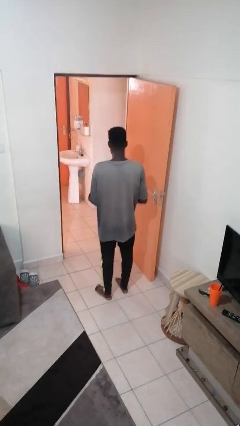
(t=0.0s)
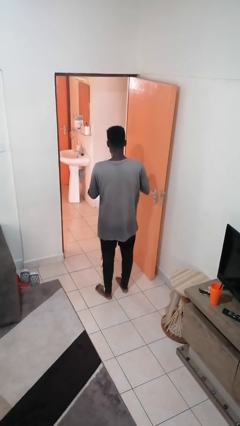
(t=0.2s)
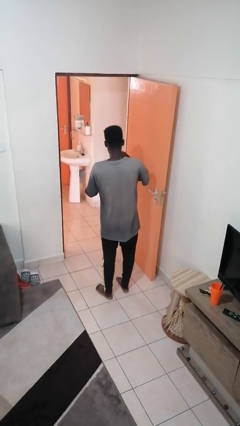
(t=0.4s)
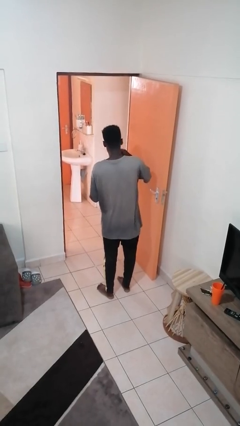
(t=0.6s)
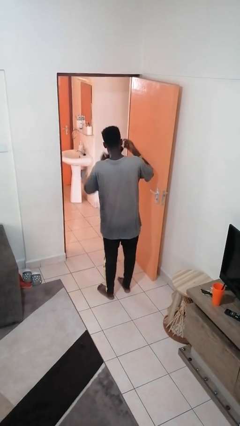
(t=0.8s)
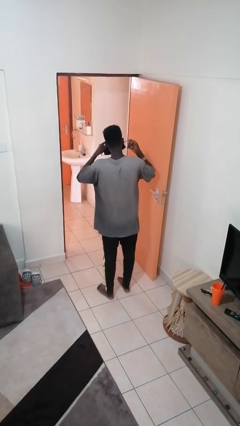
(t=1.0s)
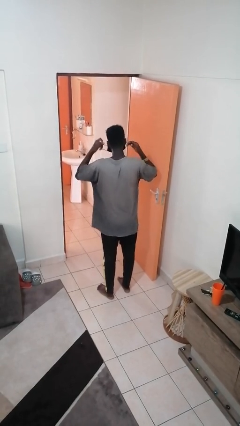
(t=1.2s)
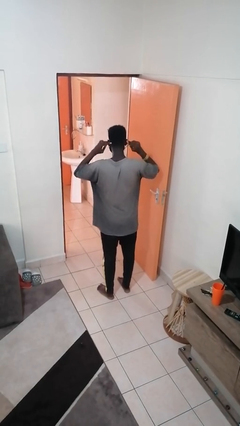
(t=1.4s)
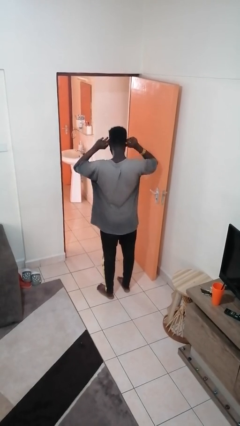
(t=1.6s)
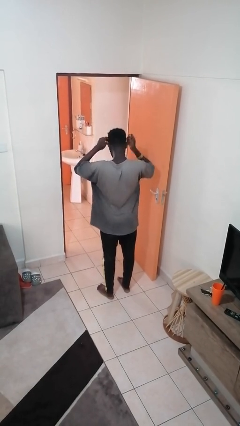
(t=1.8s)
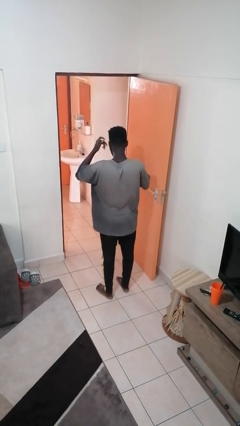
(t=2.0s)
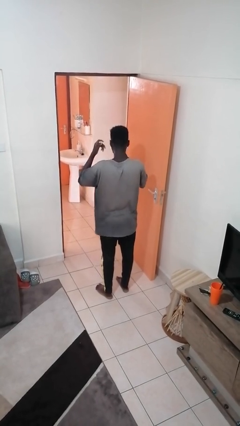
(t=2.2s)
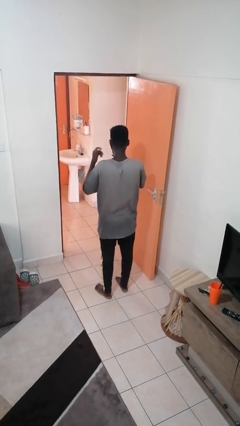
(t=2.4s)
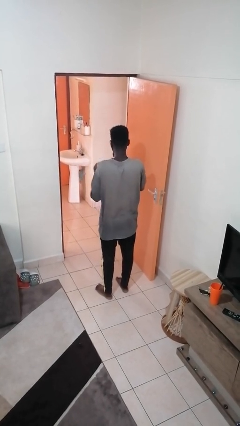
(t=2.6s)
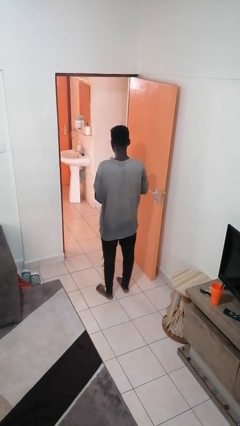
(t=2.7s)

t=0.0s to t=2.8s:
person puts on facemask

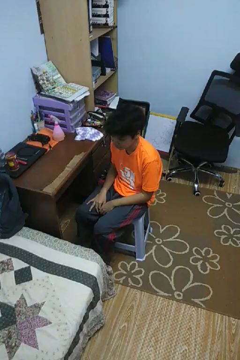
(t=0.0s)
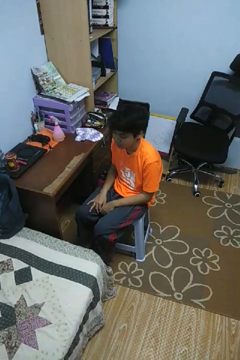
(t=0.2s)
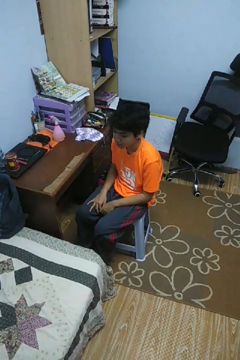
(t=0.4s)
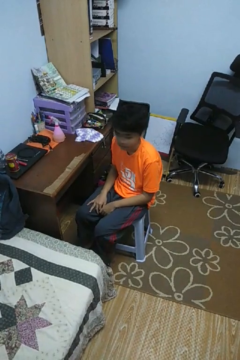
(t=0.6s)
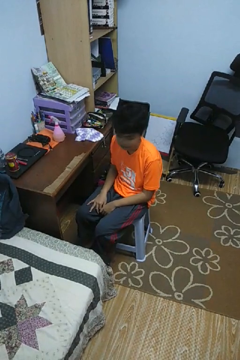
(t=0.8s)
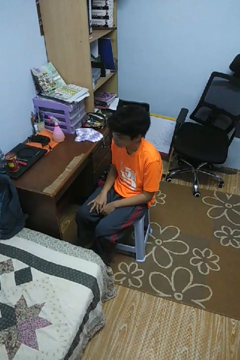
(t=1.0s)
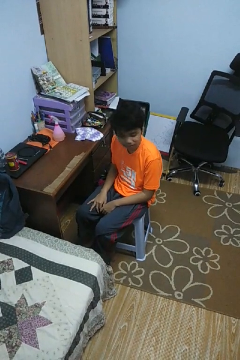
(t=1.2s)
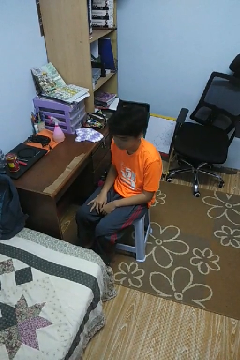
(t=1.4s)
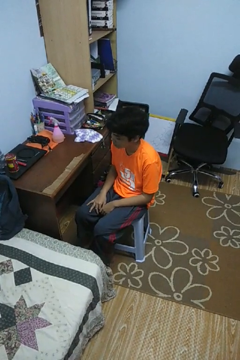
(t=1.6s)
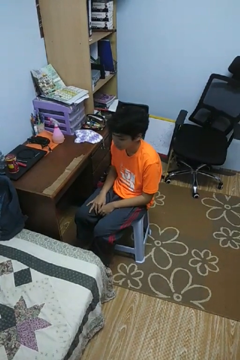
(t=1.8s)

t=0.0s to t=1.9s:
person shakes head

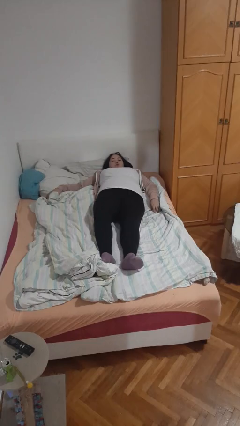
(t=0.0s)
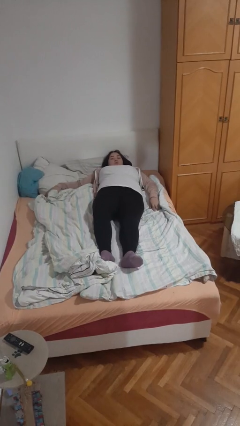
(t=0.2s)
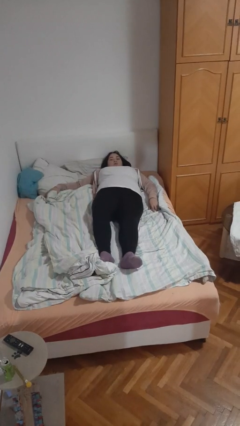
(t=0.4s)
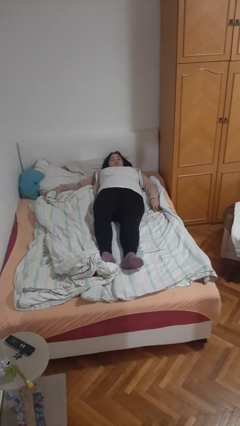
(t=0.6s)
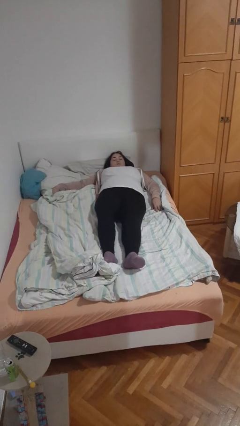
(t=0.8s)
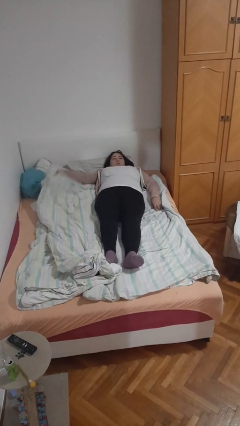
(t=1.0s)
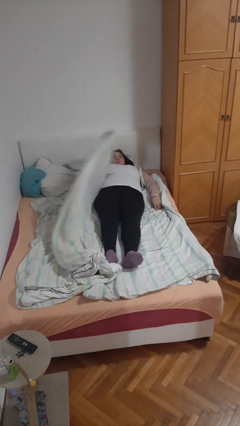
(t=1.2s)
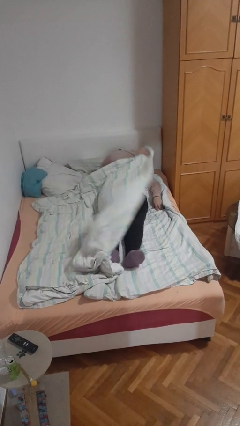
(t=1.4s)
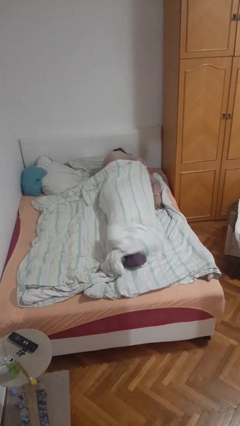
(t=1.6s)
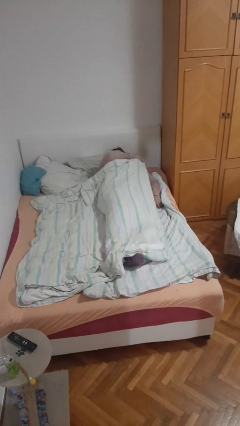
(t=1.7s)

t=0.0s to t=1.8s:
person covers with bedsheets

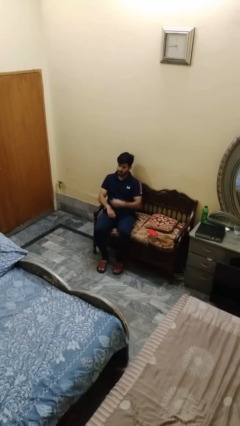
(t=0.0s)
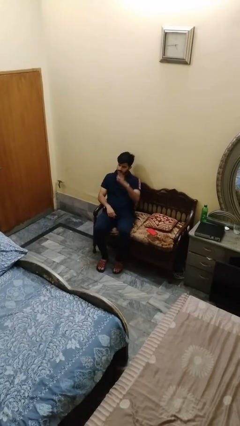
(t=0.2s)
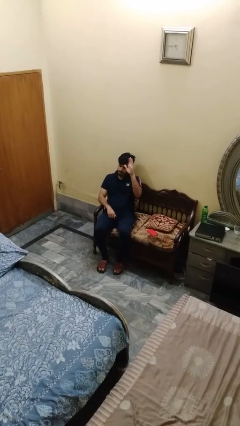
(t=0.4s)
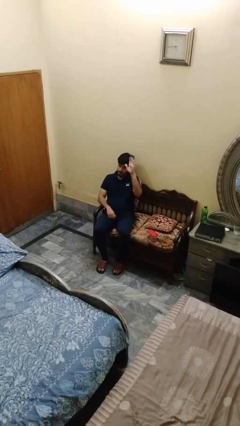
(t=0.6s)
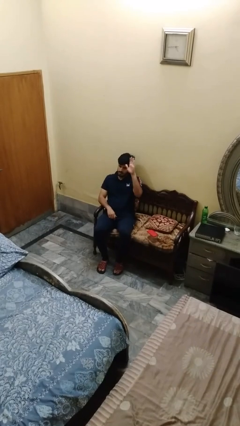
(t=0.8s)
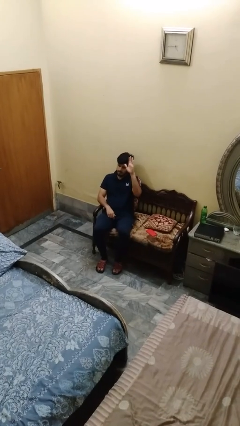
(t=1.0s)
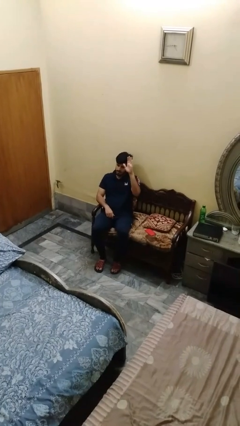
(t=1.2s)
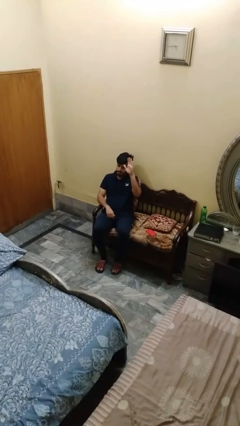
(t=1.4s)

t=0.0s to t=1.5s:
person gestures raise hand

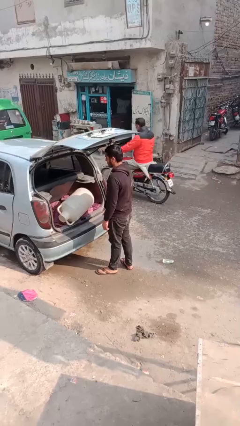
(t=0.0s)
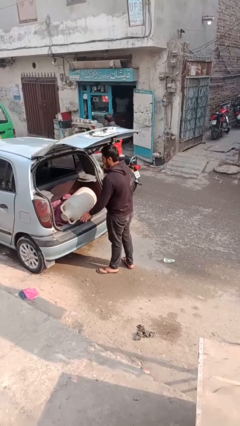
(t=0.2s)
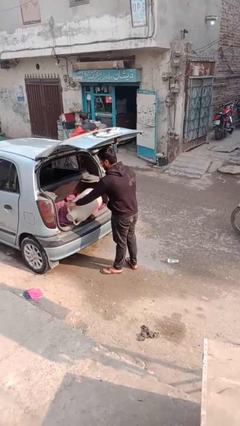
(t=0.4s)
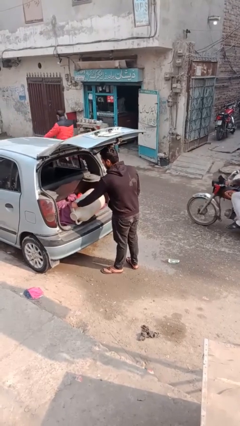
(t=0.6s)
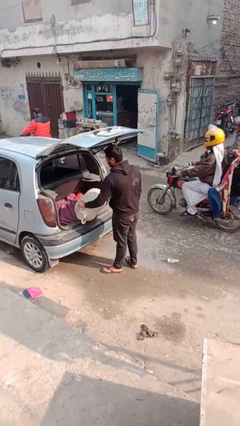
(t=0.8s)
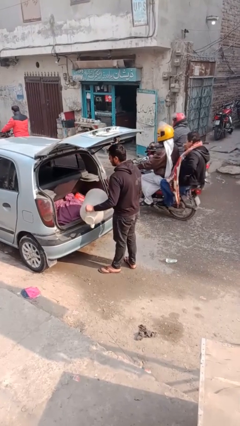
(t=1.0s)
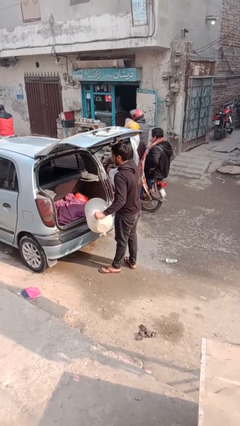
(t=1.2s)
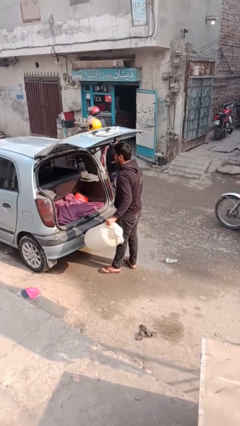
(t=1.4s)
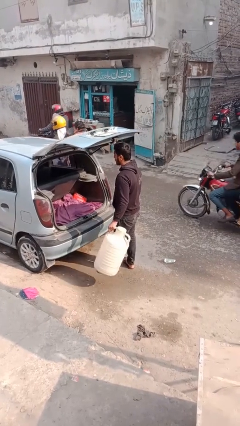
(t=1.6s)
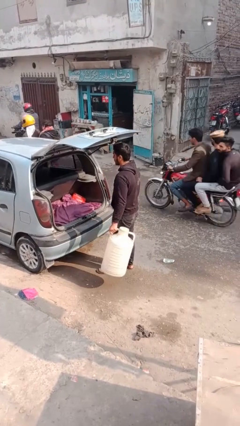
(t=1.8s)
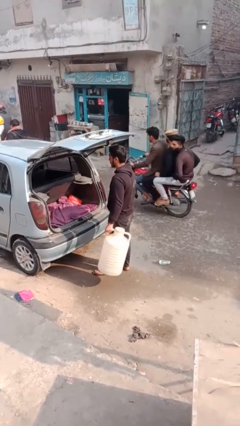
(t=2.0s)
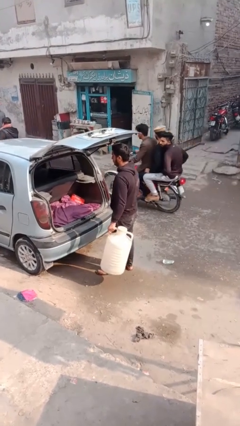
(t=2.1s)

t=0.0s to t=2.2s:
person unloads car

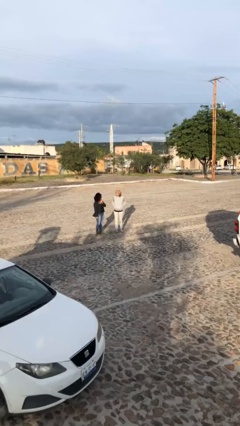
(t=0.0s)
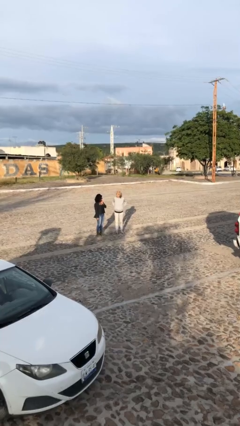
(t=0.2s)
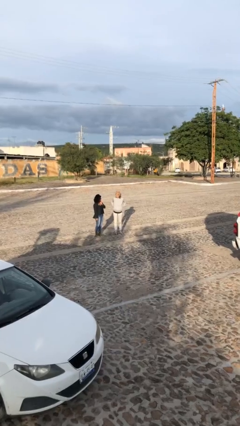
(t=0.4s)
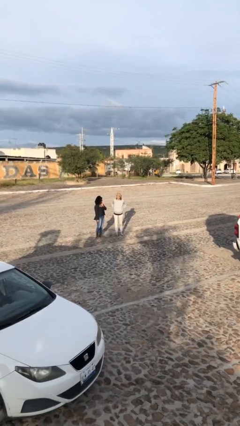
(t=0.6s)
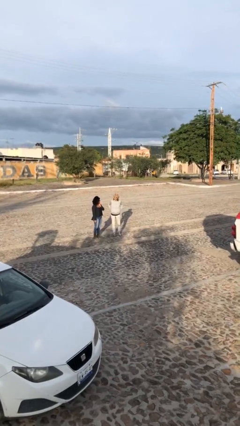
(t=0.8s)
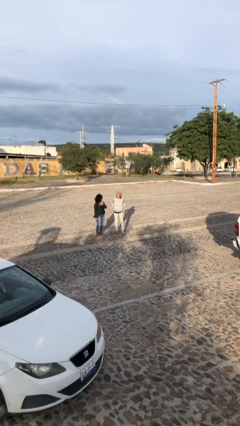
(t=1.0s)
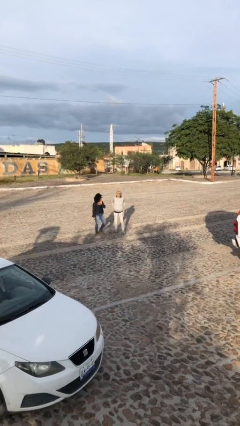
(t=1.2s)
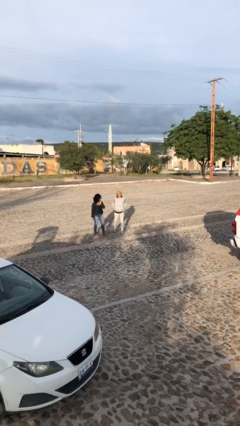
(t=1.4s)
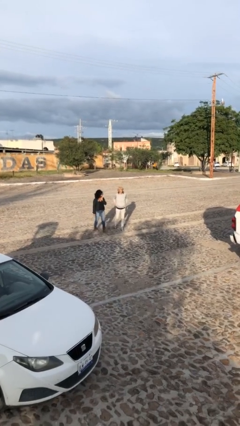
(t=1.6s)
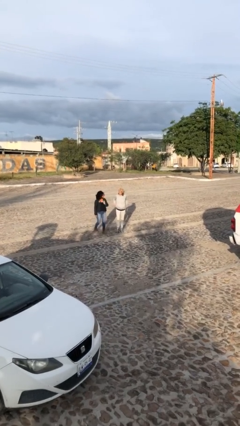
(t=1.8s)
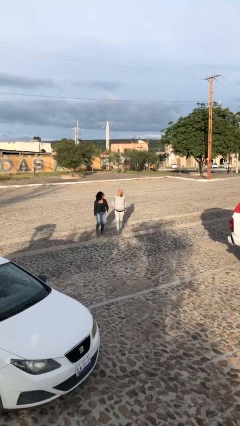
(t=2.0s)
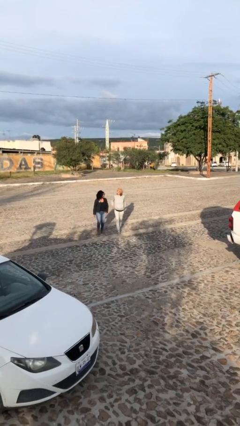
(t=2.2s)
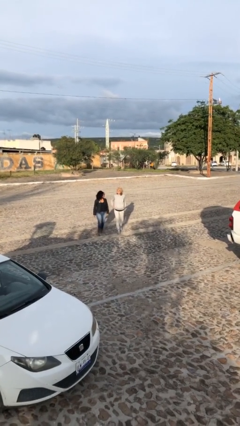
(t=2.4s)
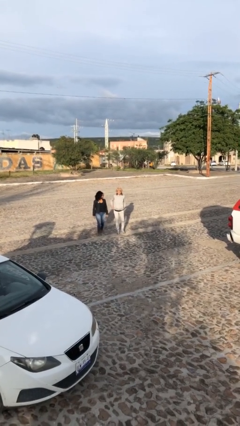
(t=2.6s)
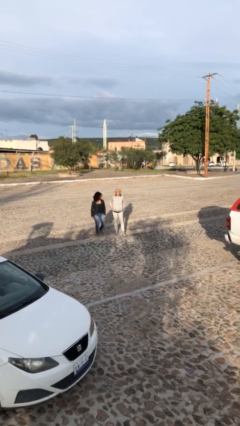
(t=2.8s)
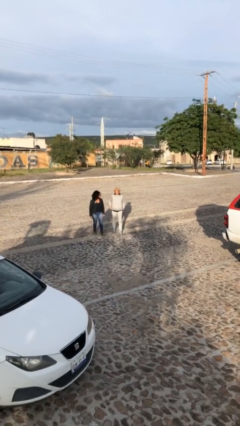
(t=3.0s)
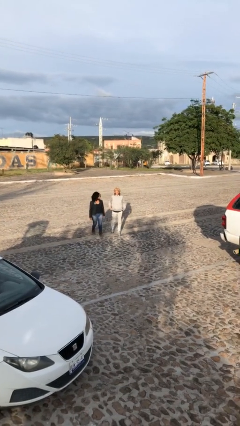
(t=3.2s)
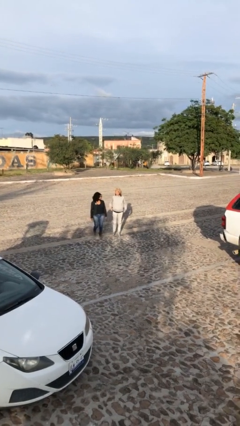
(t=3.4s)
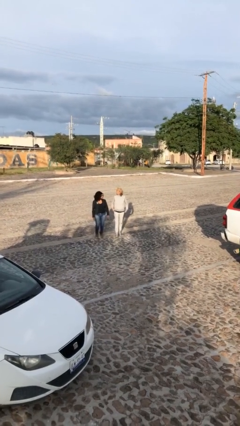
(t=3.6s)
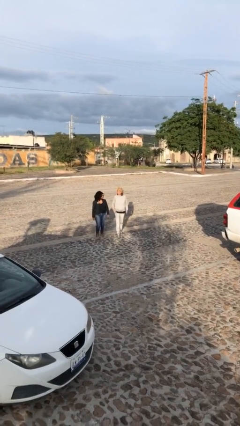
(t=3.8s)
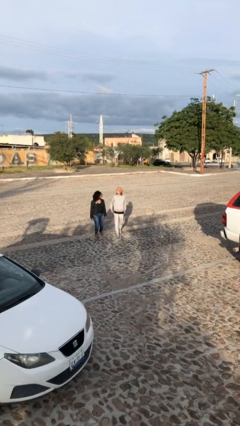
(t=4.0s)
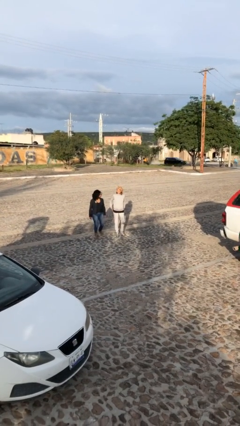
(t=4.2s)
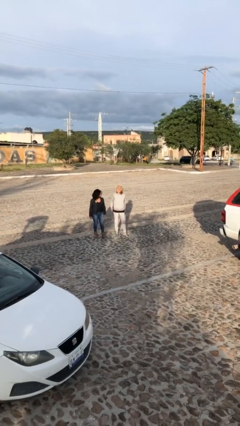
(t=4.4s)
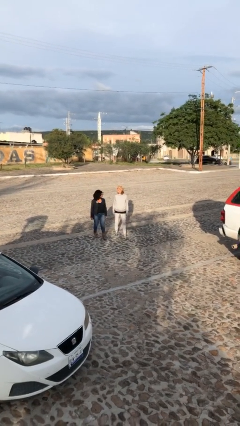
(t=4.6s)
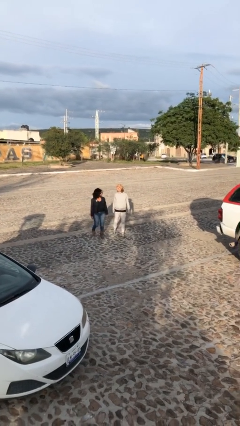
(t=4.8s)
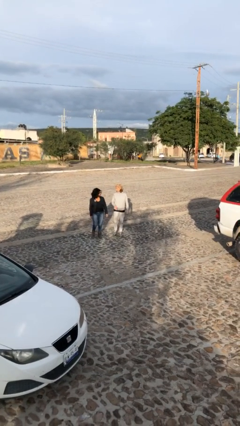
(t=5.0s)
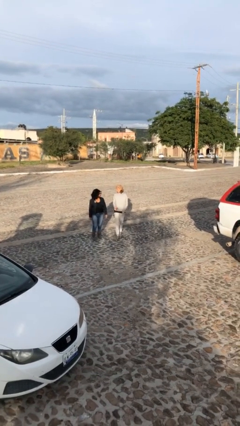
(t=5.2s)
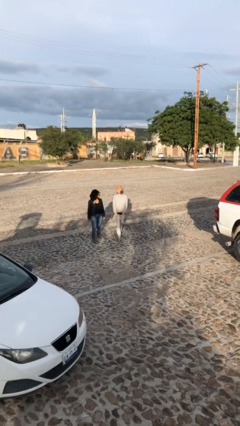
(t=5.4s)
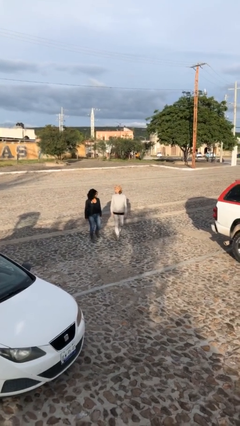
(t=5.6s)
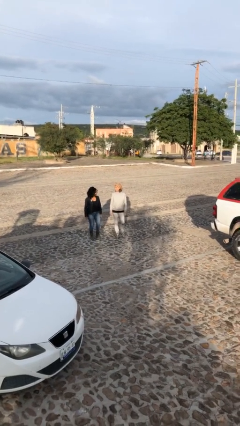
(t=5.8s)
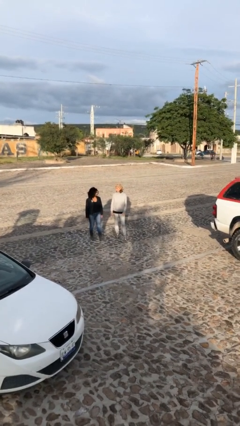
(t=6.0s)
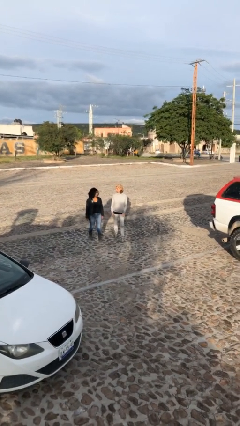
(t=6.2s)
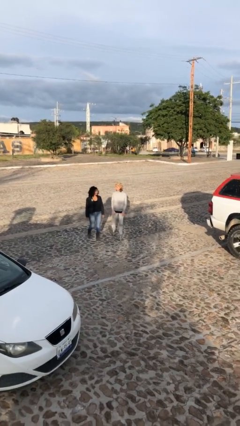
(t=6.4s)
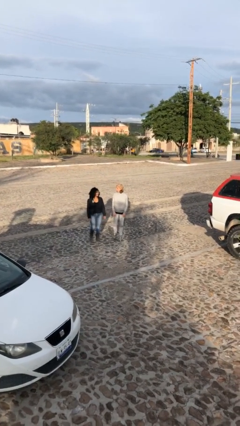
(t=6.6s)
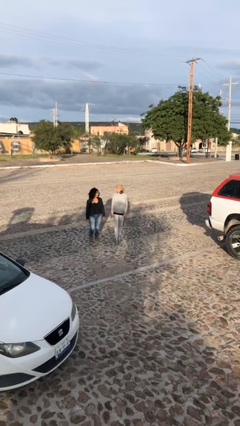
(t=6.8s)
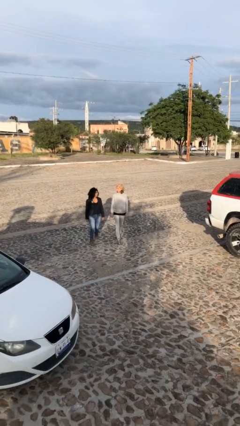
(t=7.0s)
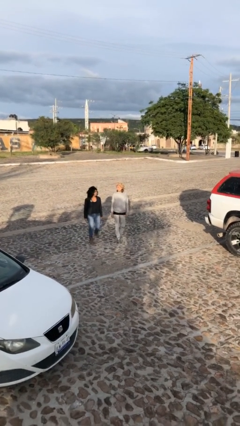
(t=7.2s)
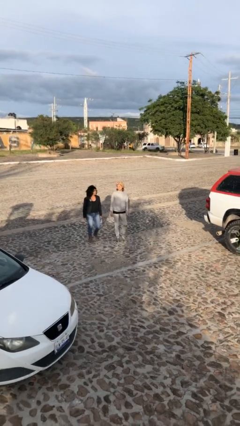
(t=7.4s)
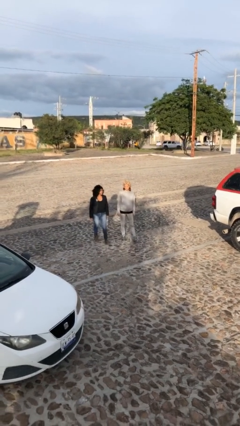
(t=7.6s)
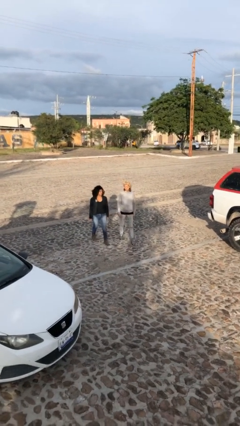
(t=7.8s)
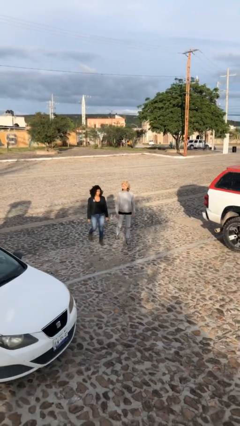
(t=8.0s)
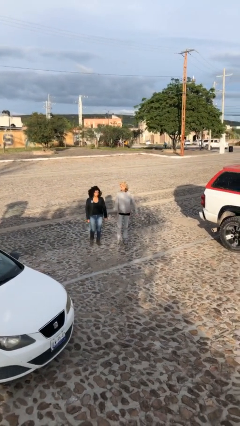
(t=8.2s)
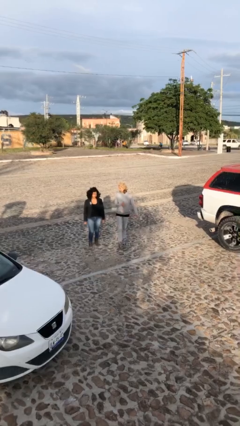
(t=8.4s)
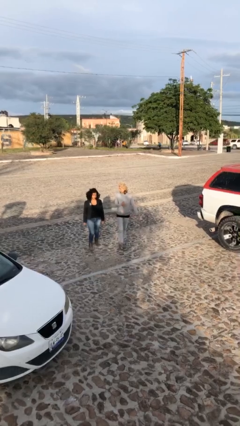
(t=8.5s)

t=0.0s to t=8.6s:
person talks to person
